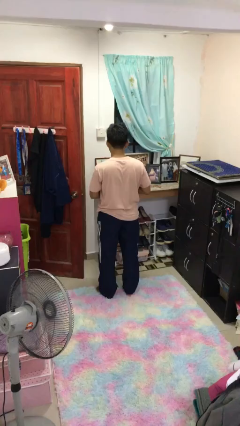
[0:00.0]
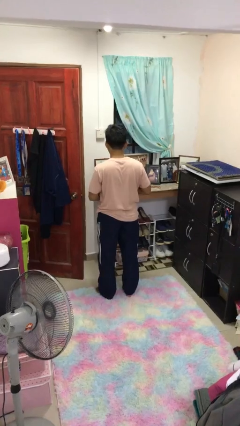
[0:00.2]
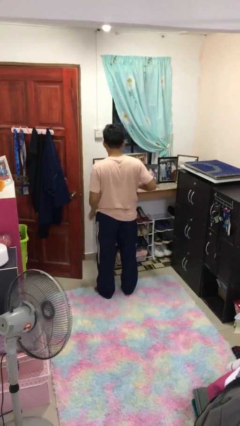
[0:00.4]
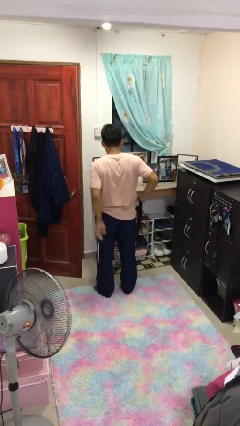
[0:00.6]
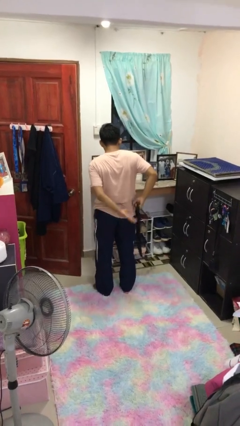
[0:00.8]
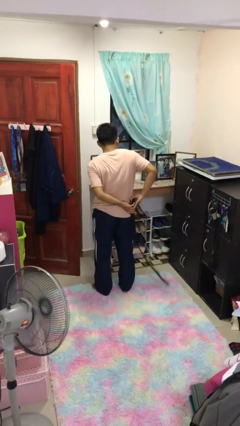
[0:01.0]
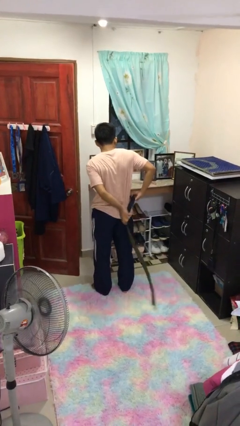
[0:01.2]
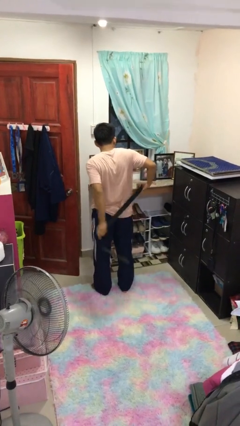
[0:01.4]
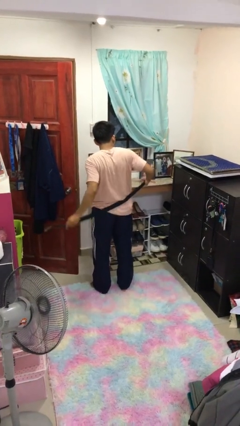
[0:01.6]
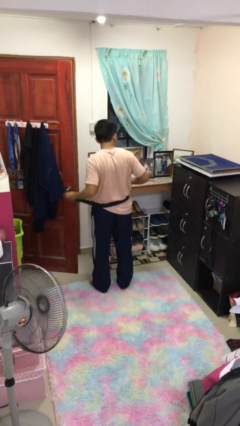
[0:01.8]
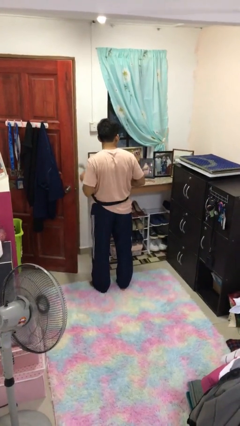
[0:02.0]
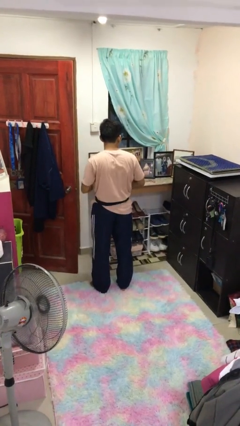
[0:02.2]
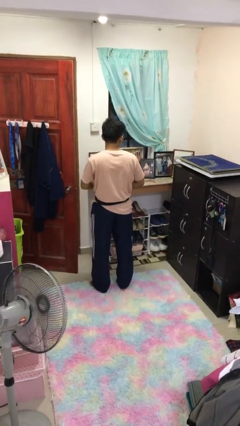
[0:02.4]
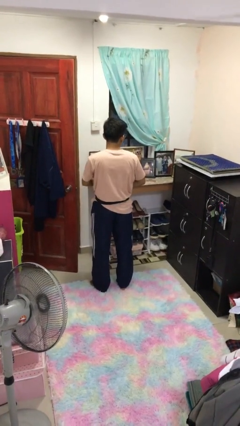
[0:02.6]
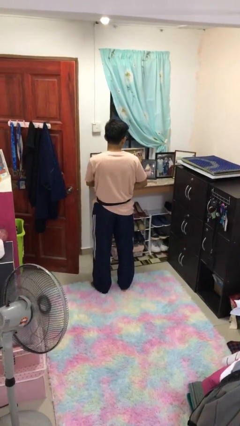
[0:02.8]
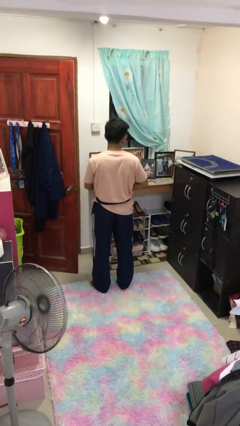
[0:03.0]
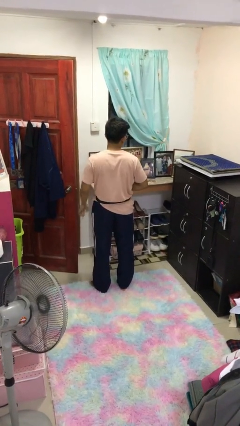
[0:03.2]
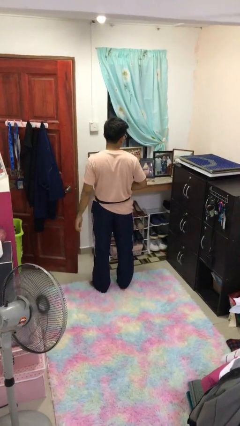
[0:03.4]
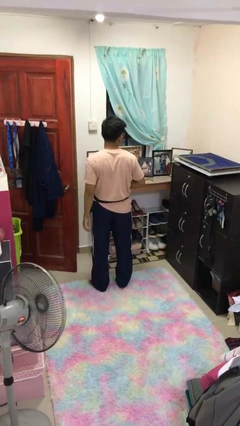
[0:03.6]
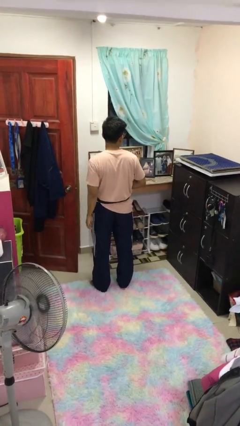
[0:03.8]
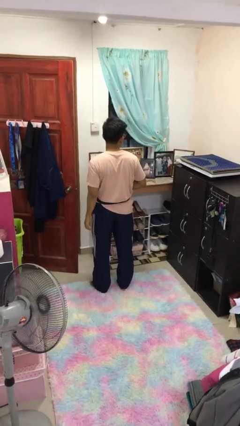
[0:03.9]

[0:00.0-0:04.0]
person puts on belt

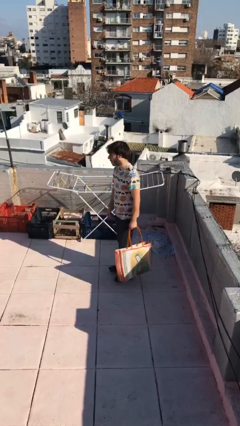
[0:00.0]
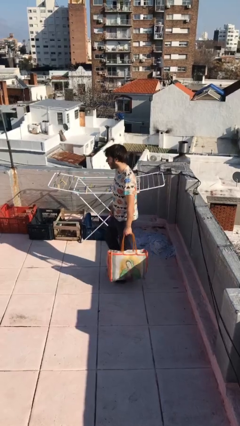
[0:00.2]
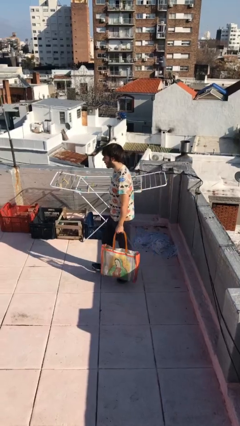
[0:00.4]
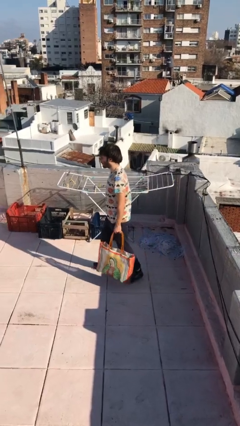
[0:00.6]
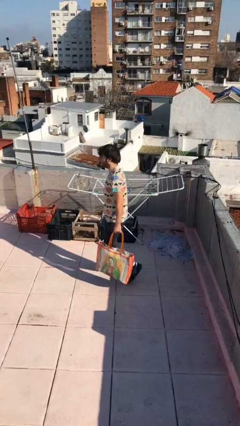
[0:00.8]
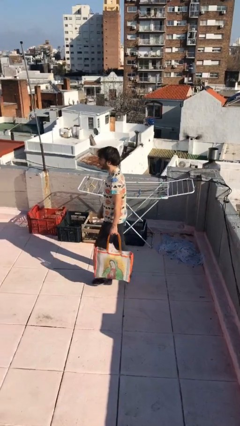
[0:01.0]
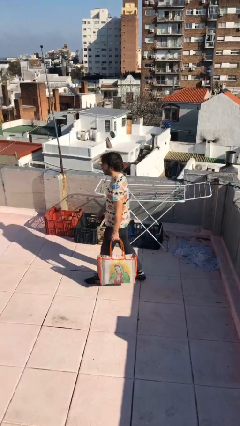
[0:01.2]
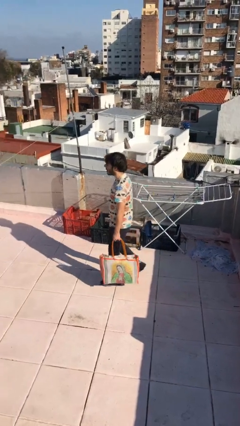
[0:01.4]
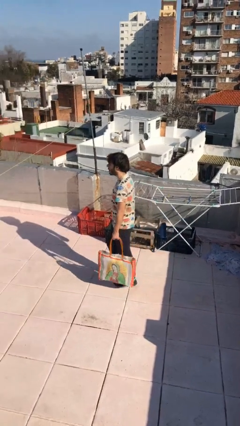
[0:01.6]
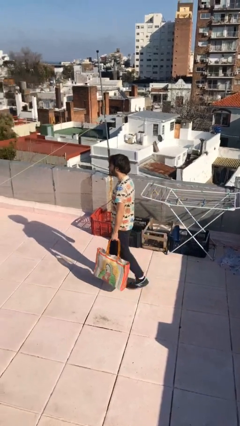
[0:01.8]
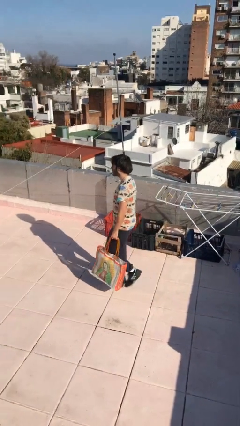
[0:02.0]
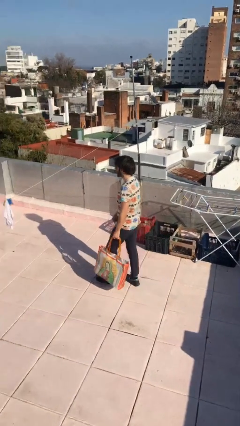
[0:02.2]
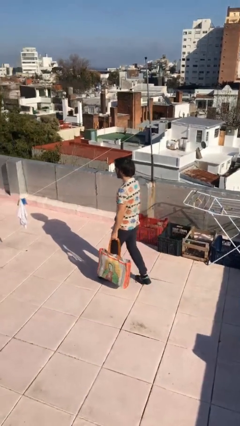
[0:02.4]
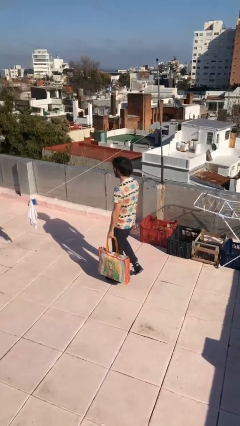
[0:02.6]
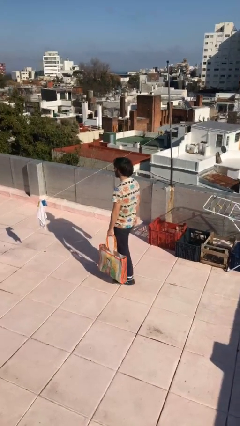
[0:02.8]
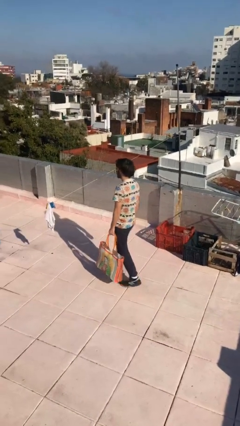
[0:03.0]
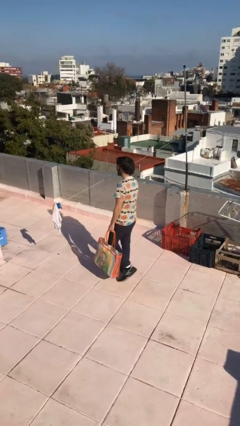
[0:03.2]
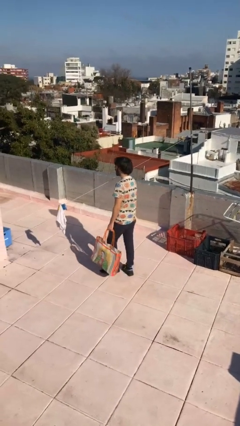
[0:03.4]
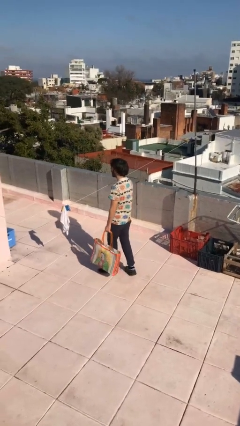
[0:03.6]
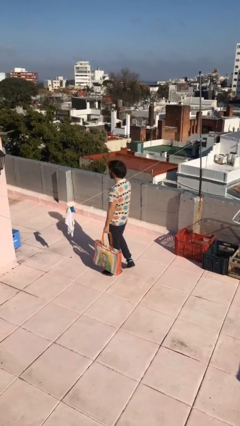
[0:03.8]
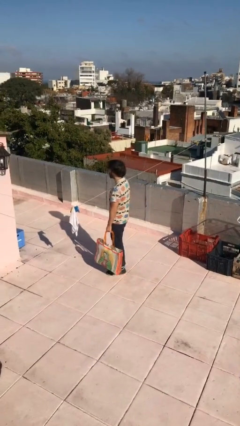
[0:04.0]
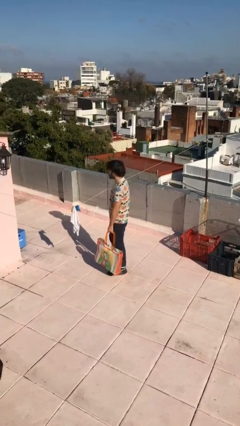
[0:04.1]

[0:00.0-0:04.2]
person carries groceries

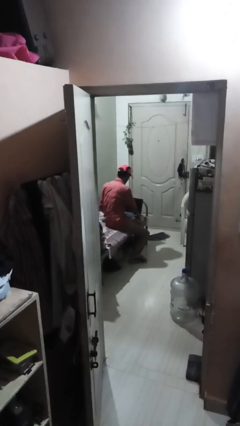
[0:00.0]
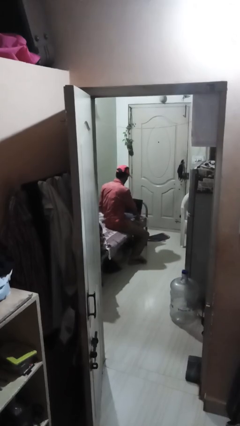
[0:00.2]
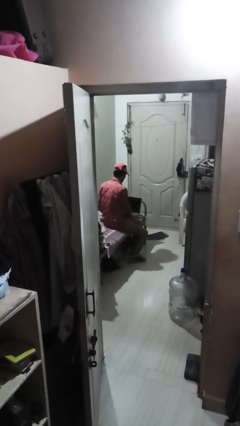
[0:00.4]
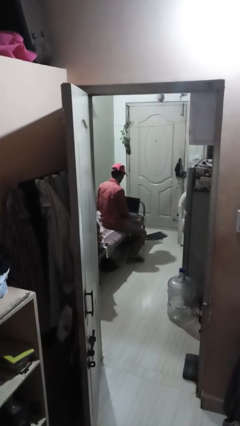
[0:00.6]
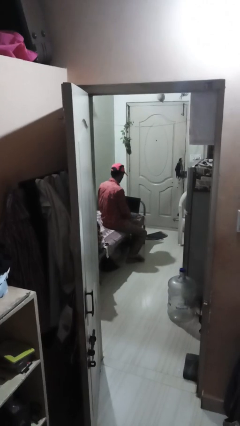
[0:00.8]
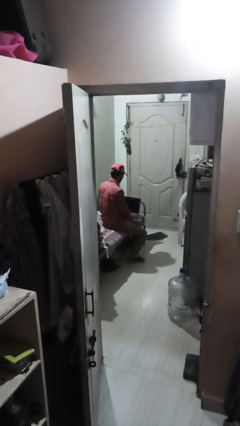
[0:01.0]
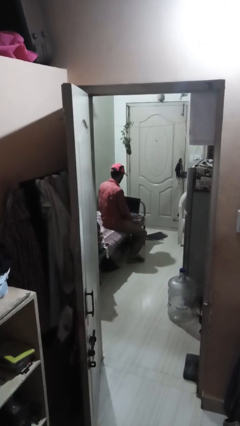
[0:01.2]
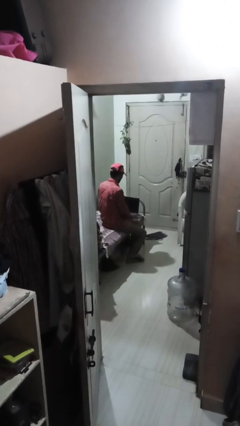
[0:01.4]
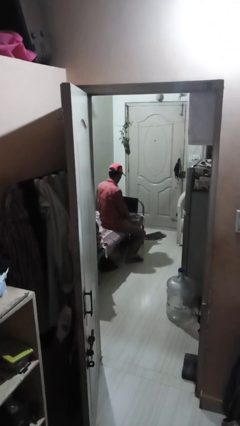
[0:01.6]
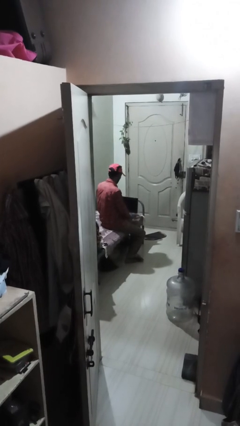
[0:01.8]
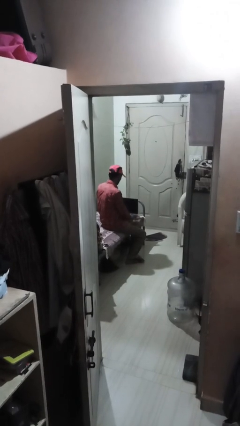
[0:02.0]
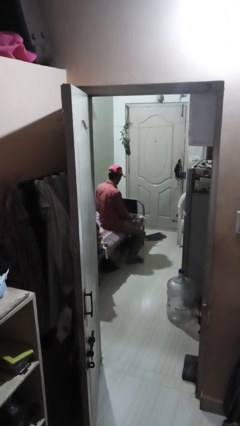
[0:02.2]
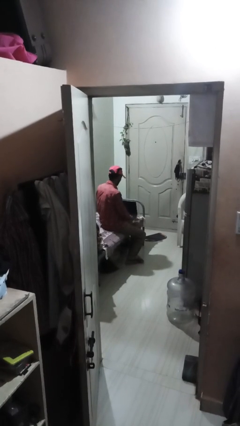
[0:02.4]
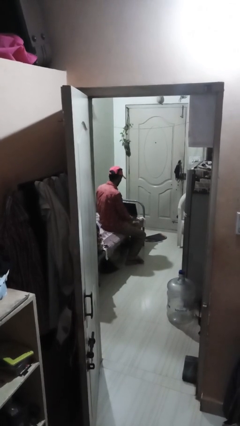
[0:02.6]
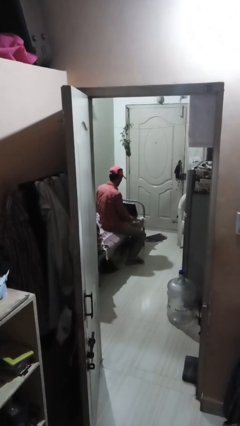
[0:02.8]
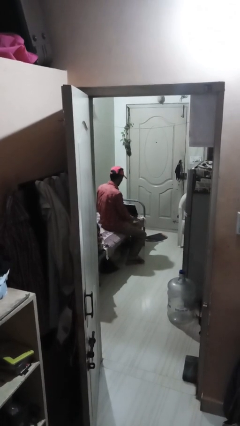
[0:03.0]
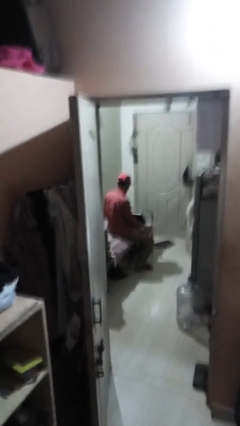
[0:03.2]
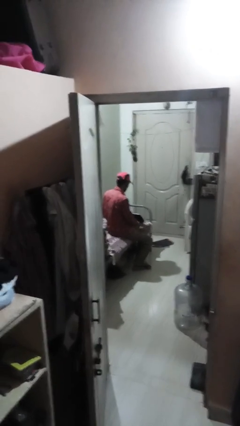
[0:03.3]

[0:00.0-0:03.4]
person closes laptop

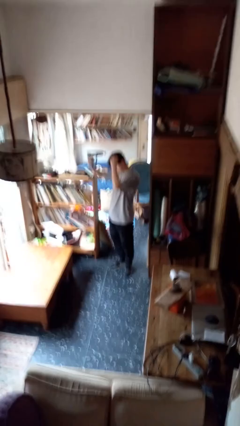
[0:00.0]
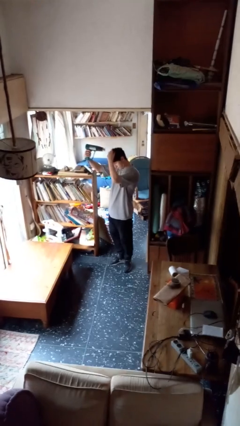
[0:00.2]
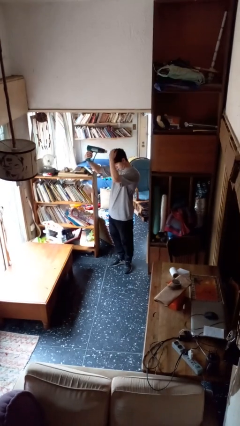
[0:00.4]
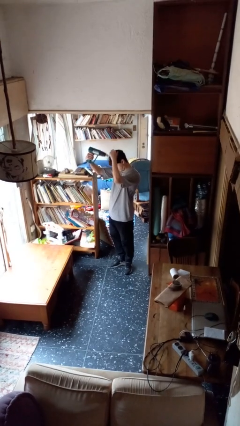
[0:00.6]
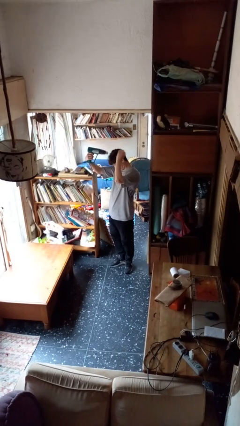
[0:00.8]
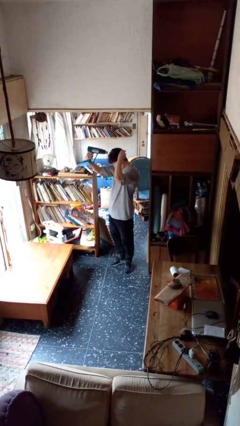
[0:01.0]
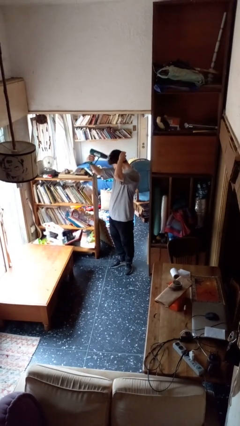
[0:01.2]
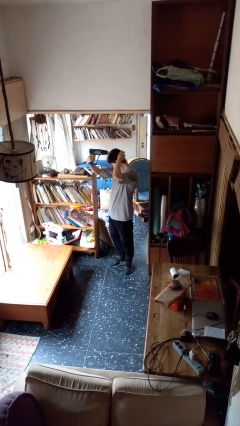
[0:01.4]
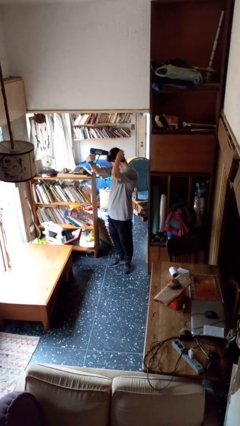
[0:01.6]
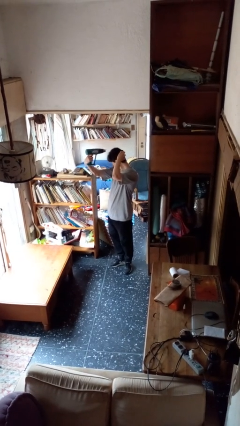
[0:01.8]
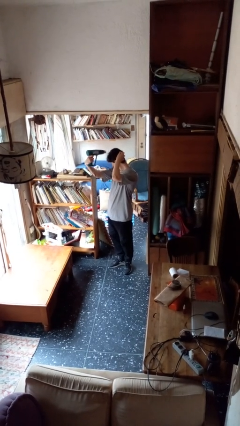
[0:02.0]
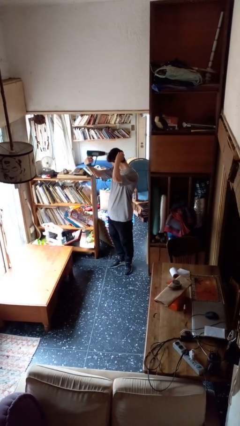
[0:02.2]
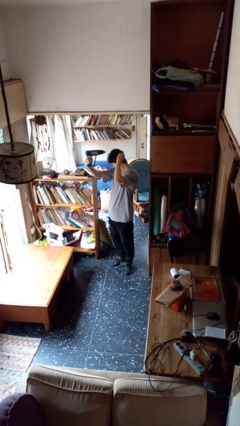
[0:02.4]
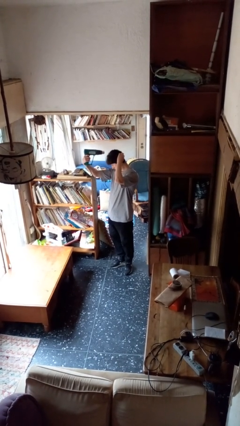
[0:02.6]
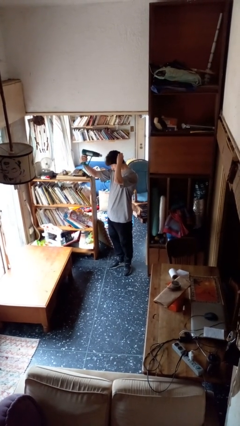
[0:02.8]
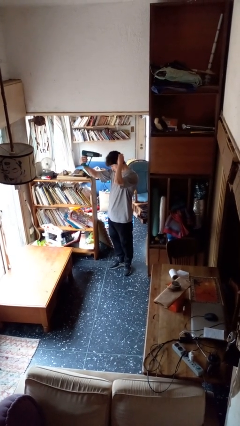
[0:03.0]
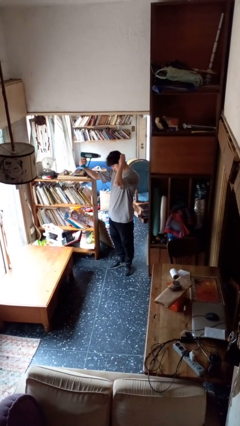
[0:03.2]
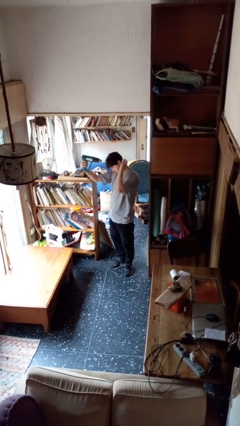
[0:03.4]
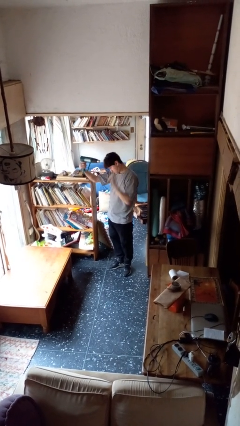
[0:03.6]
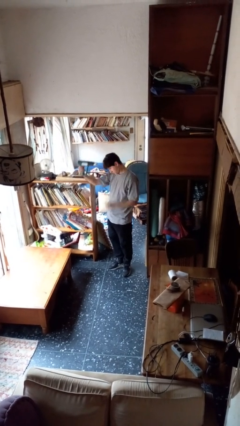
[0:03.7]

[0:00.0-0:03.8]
person dries hair with hairdryer

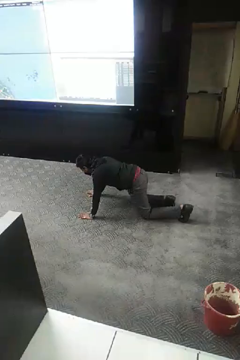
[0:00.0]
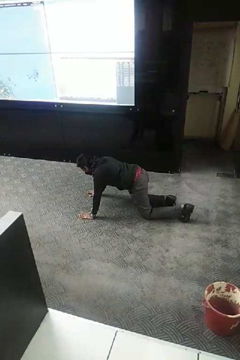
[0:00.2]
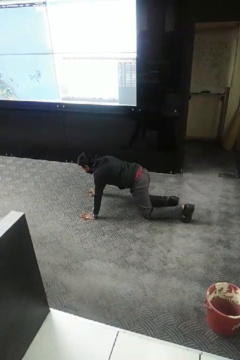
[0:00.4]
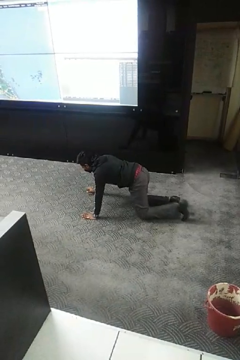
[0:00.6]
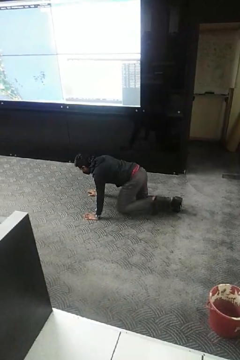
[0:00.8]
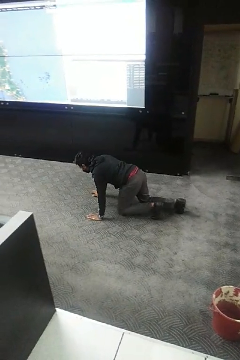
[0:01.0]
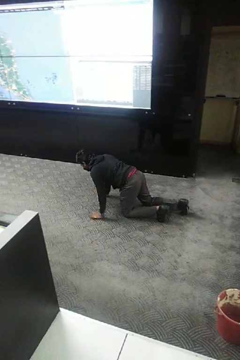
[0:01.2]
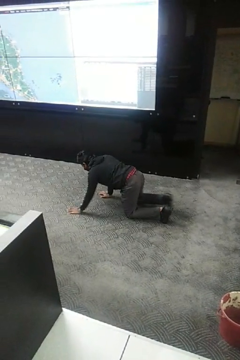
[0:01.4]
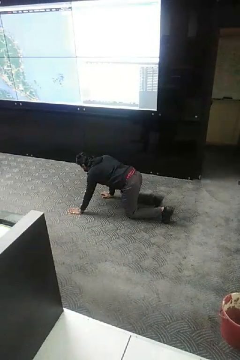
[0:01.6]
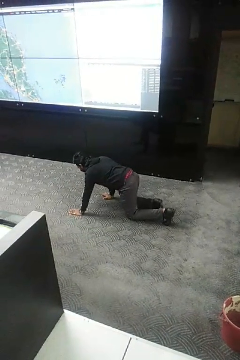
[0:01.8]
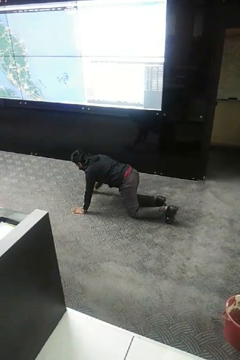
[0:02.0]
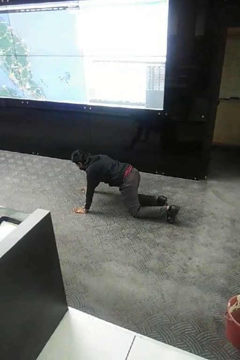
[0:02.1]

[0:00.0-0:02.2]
person crawls

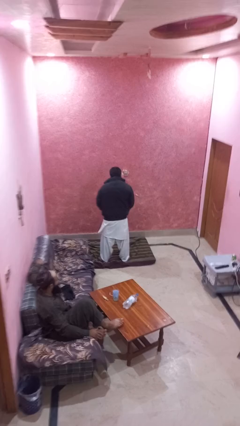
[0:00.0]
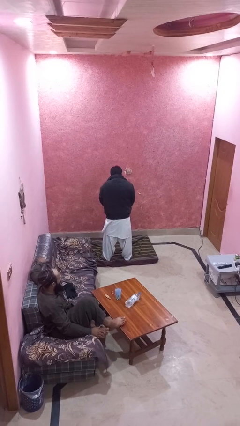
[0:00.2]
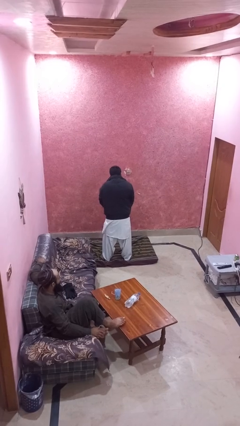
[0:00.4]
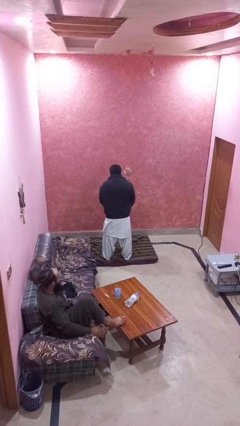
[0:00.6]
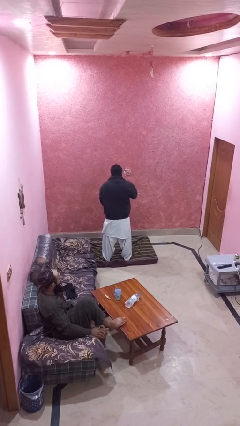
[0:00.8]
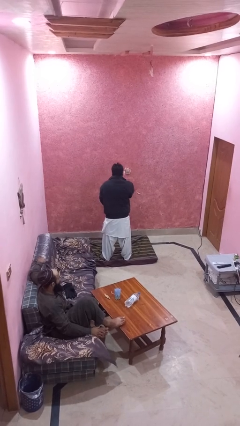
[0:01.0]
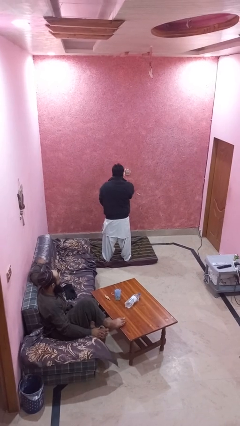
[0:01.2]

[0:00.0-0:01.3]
person zips up jacket
